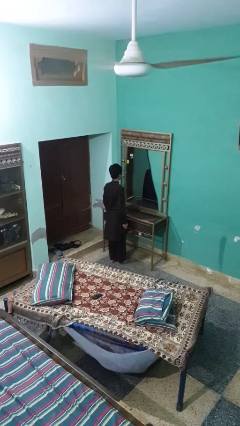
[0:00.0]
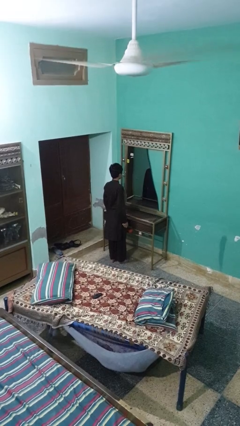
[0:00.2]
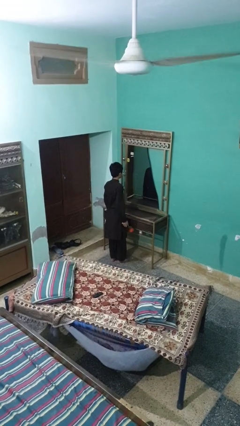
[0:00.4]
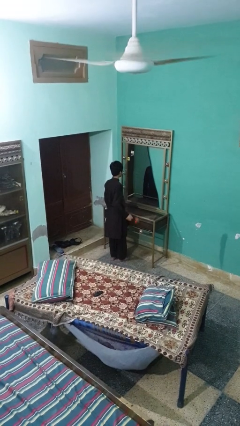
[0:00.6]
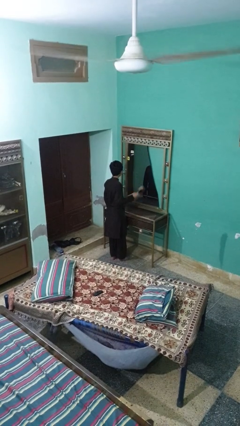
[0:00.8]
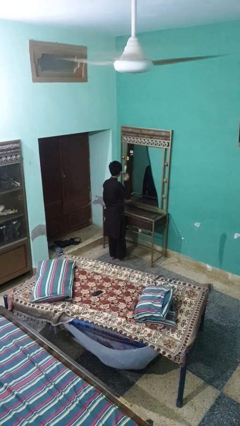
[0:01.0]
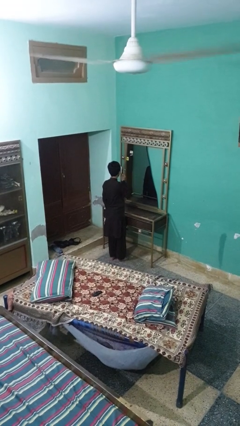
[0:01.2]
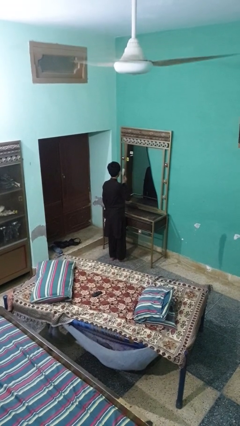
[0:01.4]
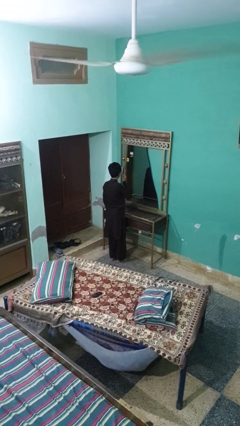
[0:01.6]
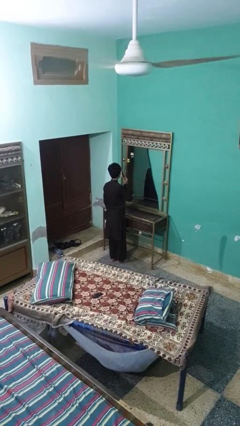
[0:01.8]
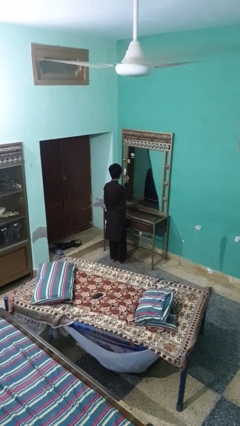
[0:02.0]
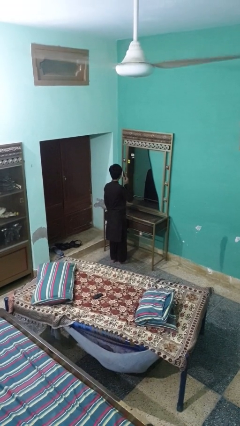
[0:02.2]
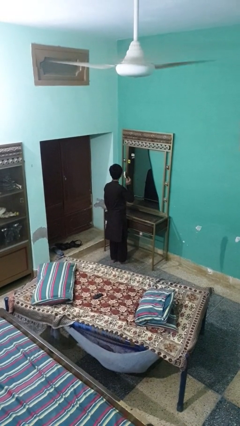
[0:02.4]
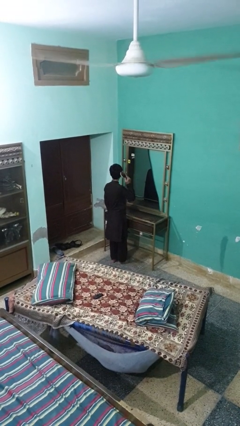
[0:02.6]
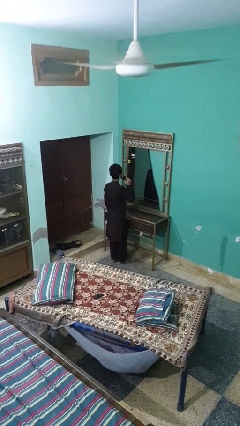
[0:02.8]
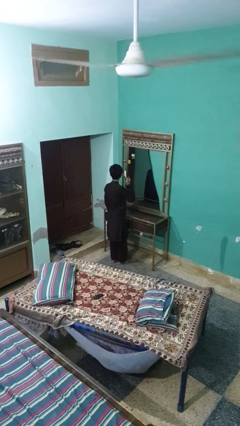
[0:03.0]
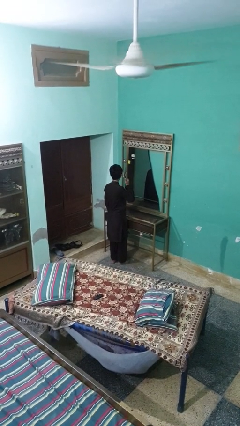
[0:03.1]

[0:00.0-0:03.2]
person brushes hair

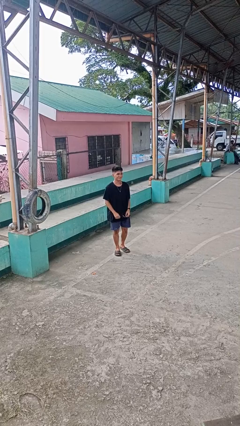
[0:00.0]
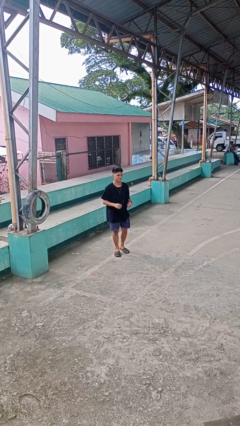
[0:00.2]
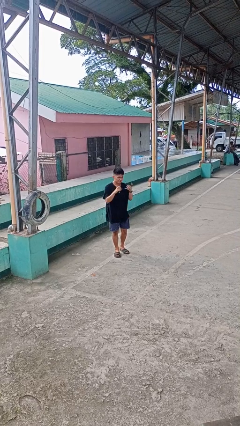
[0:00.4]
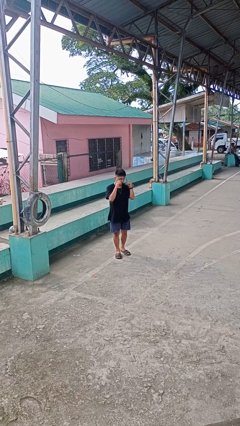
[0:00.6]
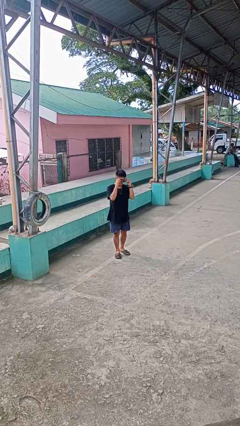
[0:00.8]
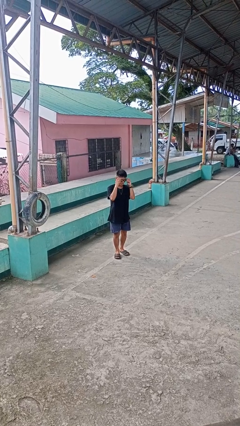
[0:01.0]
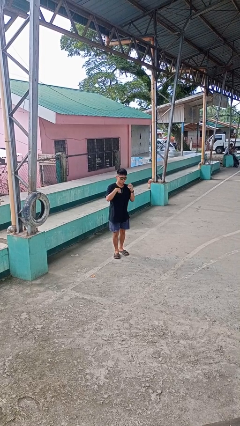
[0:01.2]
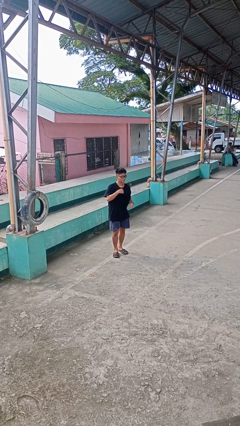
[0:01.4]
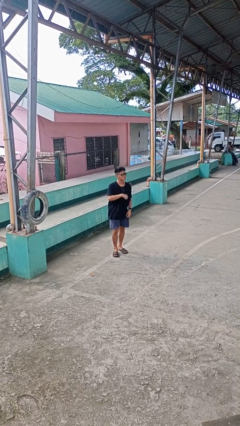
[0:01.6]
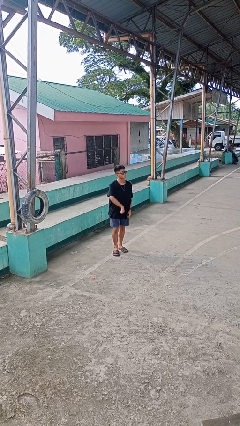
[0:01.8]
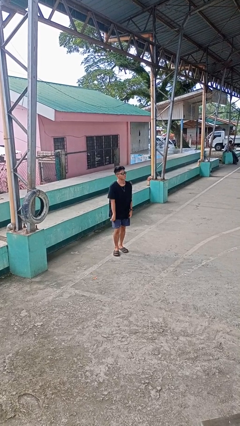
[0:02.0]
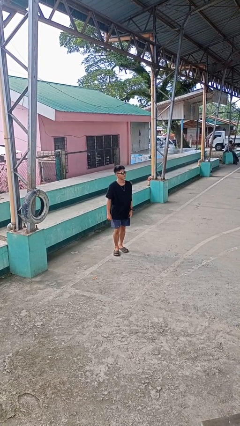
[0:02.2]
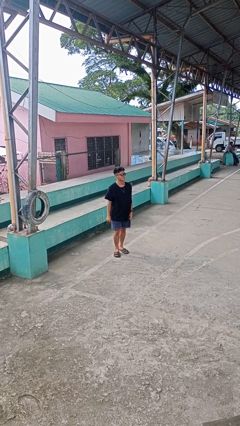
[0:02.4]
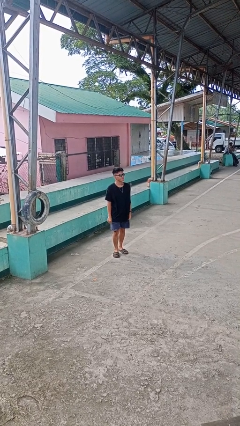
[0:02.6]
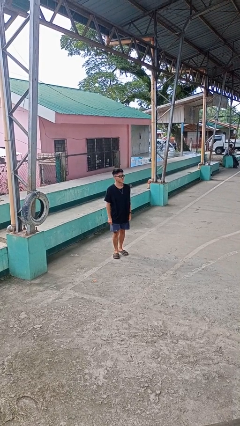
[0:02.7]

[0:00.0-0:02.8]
person puts on sunglasses

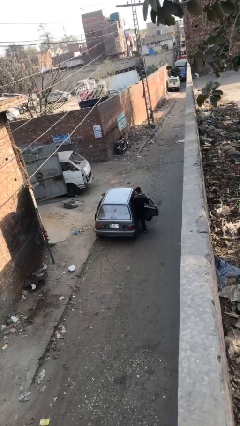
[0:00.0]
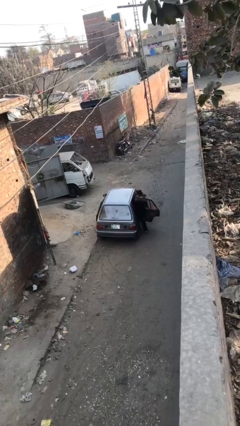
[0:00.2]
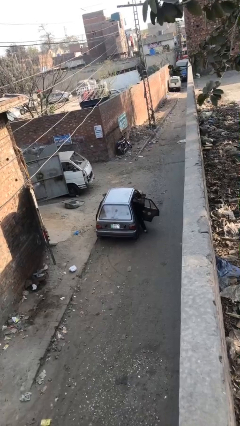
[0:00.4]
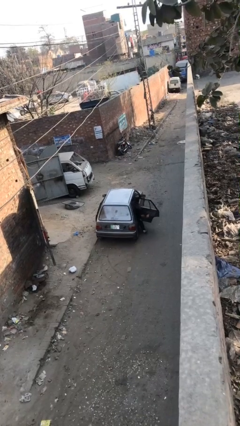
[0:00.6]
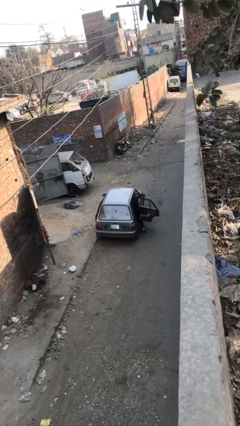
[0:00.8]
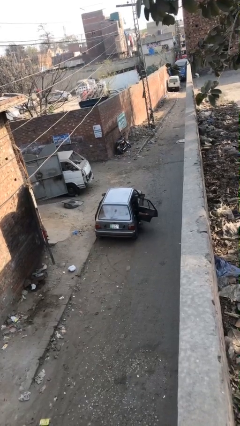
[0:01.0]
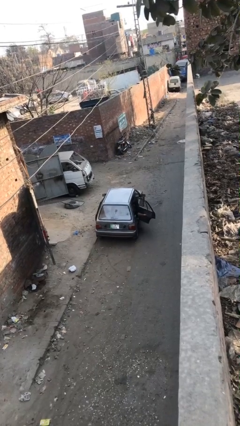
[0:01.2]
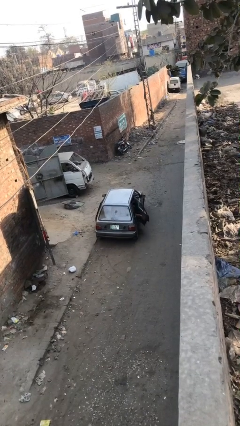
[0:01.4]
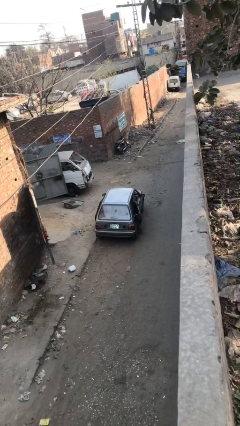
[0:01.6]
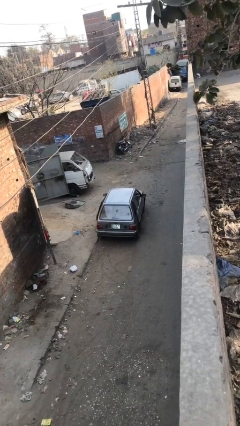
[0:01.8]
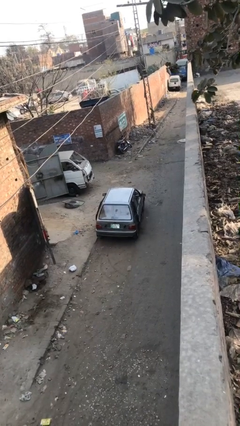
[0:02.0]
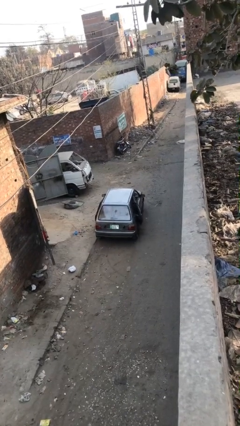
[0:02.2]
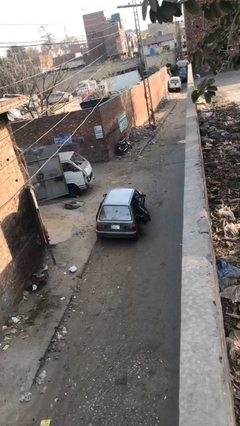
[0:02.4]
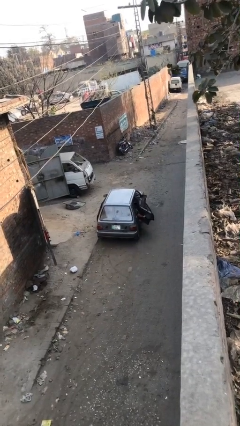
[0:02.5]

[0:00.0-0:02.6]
car picks up person

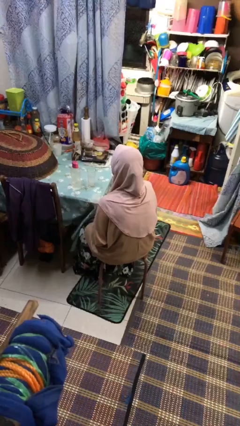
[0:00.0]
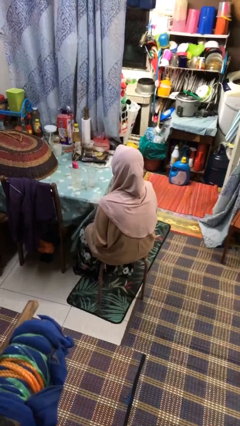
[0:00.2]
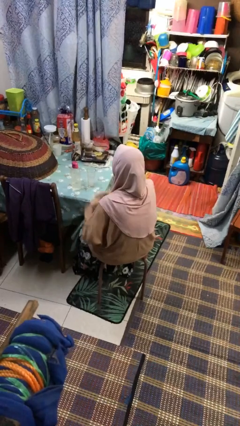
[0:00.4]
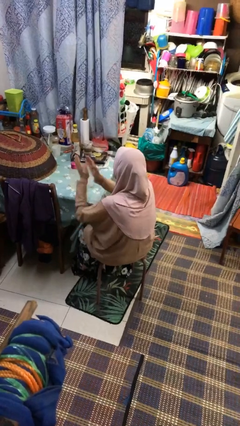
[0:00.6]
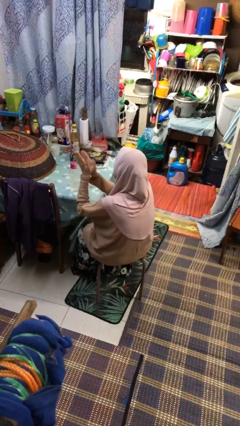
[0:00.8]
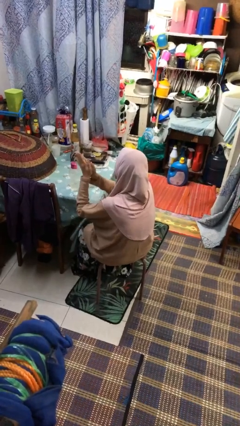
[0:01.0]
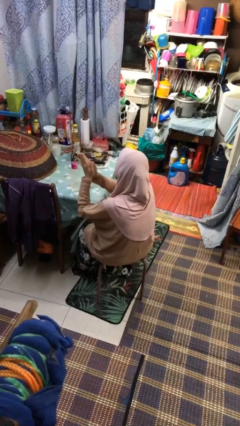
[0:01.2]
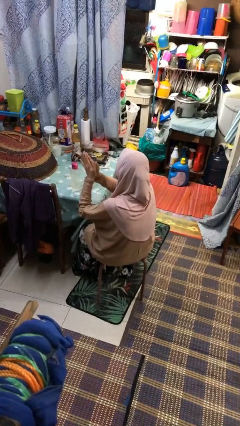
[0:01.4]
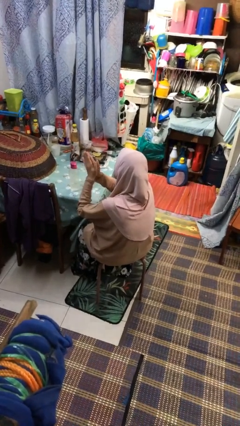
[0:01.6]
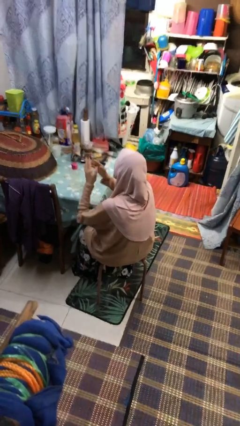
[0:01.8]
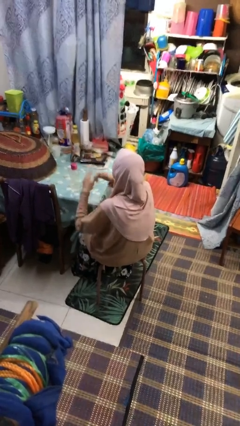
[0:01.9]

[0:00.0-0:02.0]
person claps hands

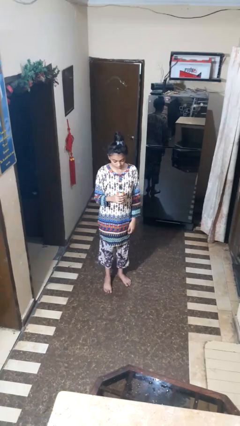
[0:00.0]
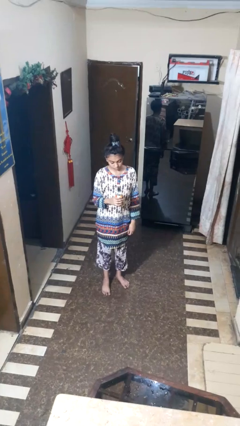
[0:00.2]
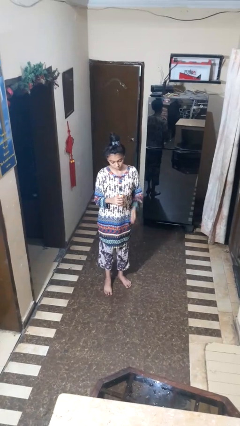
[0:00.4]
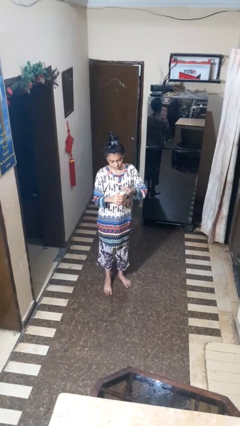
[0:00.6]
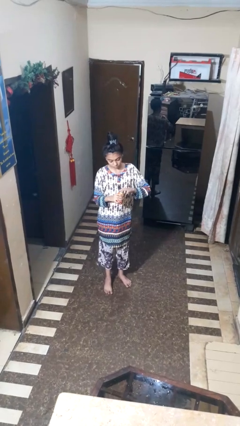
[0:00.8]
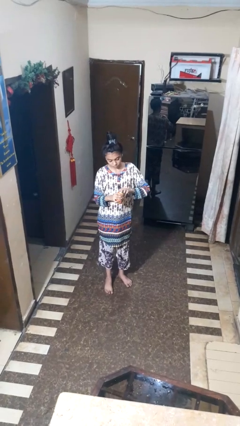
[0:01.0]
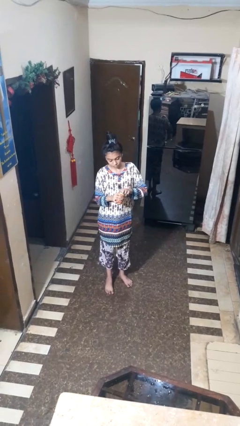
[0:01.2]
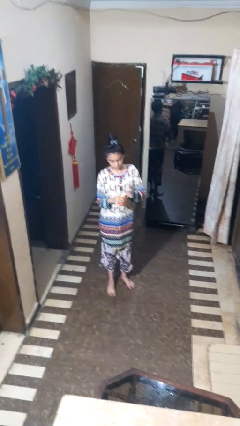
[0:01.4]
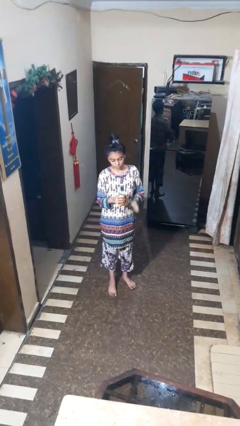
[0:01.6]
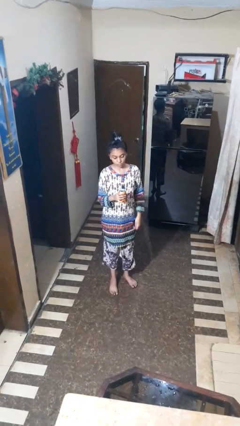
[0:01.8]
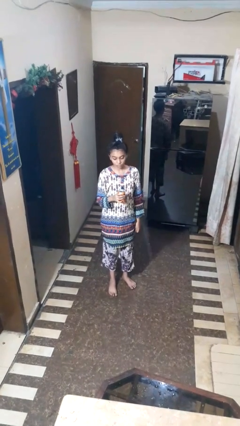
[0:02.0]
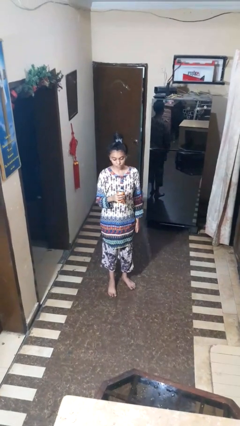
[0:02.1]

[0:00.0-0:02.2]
person opens beverage can

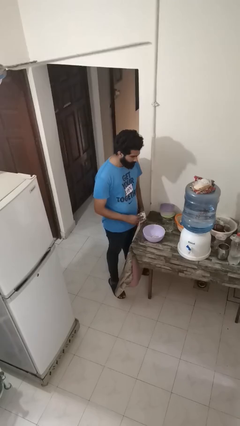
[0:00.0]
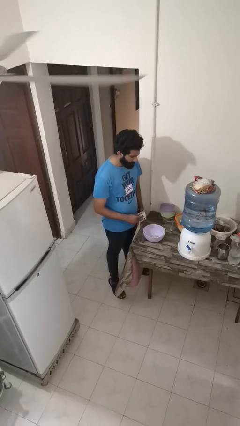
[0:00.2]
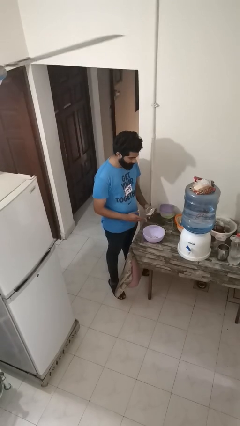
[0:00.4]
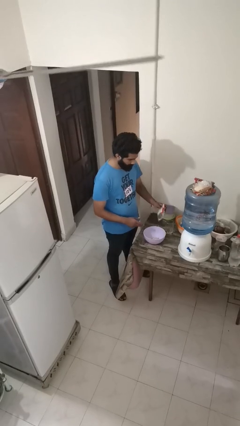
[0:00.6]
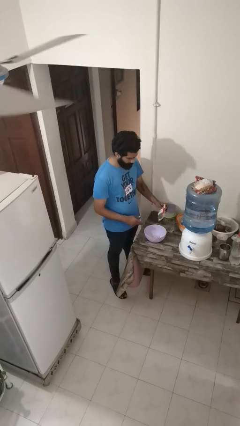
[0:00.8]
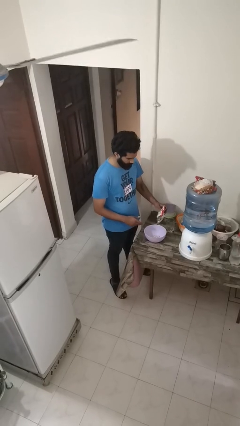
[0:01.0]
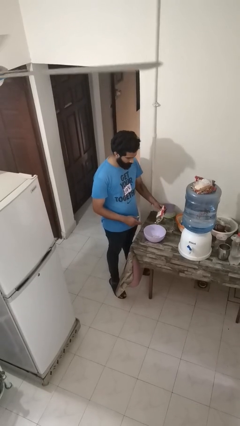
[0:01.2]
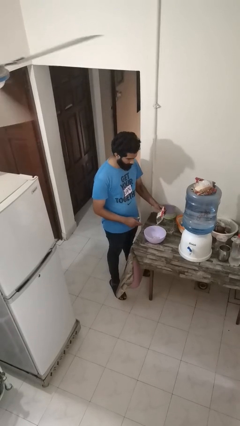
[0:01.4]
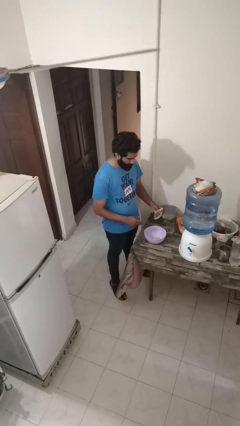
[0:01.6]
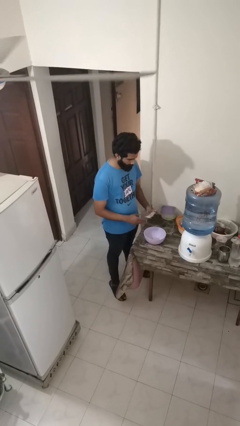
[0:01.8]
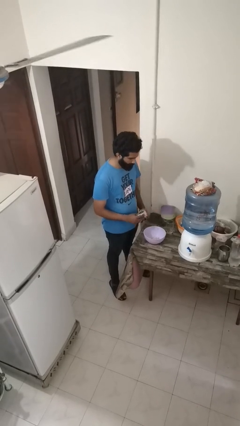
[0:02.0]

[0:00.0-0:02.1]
person pours into bowl

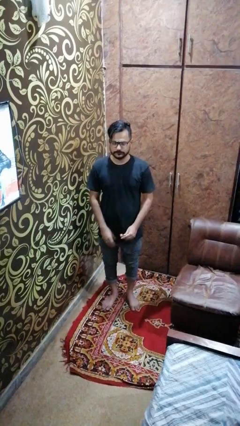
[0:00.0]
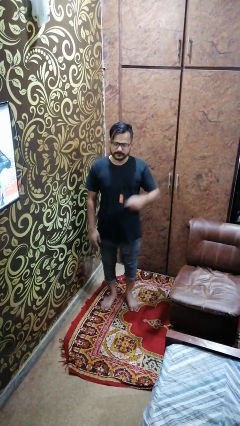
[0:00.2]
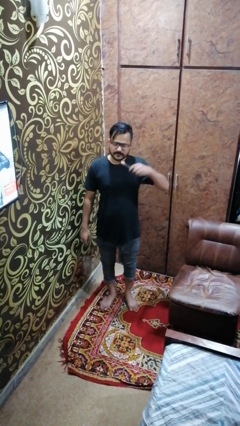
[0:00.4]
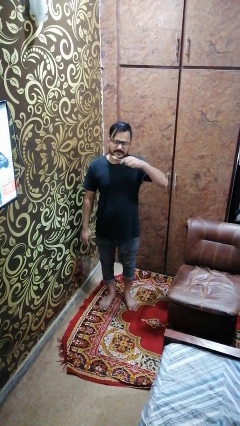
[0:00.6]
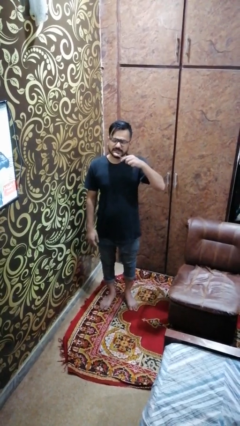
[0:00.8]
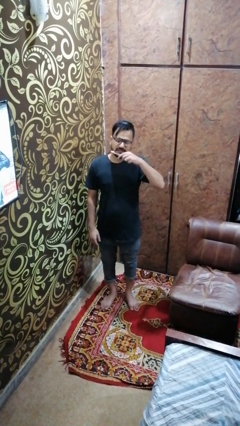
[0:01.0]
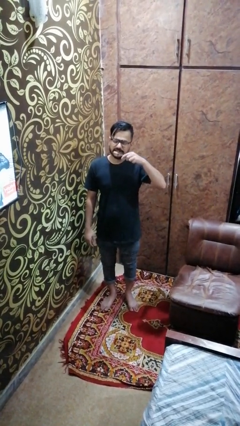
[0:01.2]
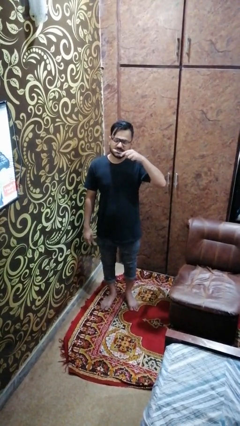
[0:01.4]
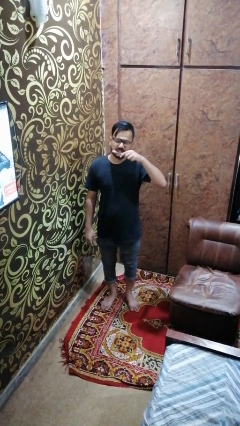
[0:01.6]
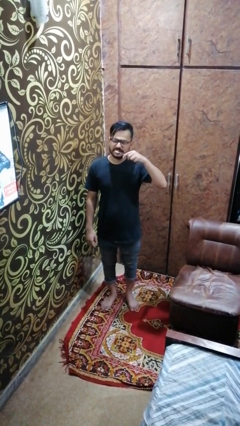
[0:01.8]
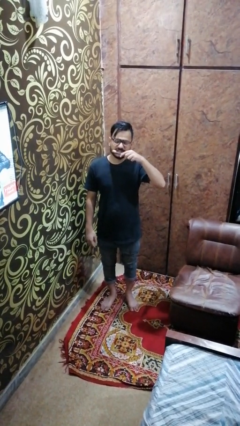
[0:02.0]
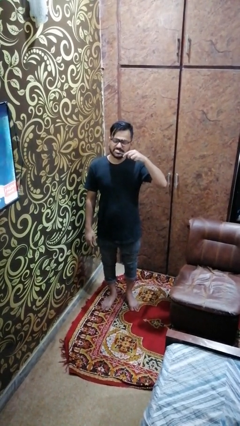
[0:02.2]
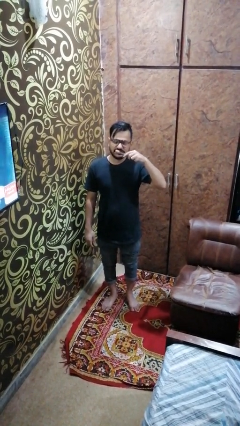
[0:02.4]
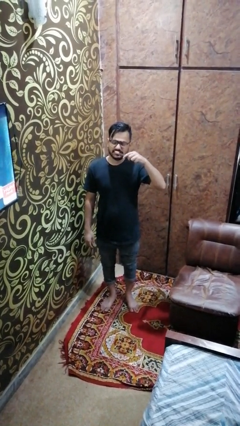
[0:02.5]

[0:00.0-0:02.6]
person brushes teeth
